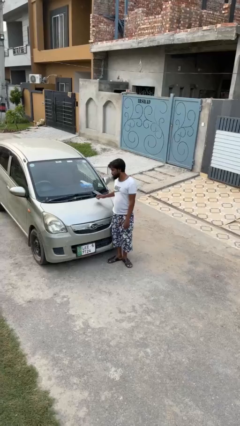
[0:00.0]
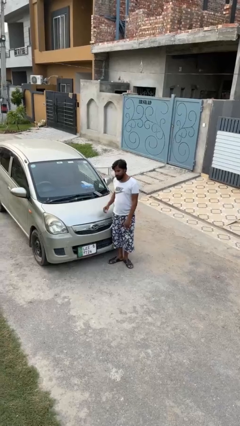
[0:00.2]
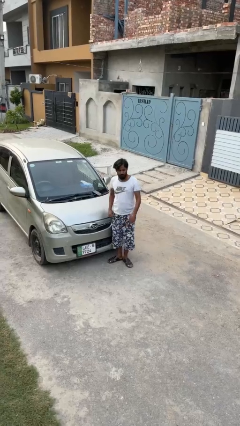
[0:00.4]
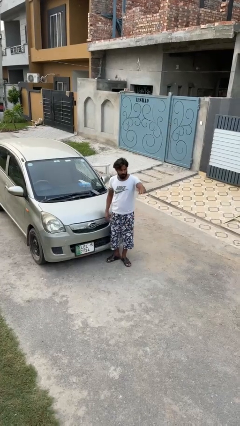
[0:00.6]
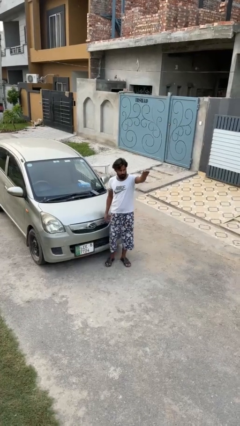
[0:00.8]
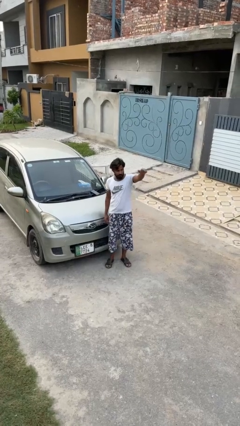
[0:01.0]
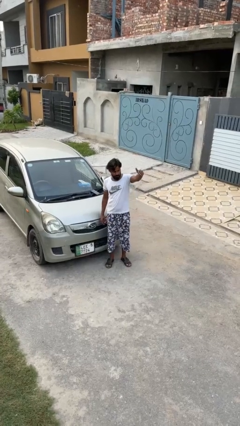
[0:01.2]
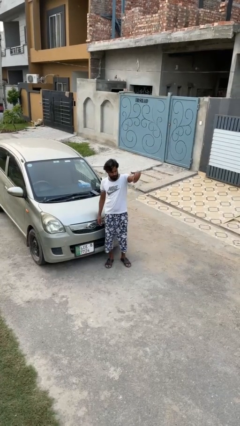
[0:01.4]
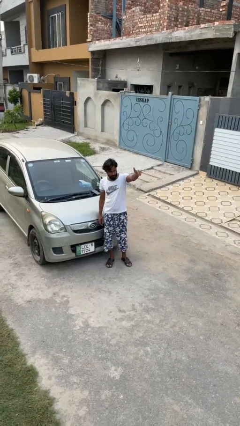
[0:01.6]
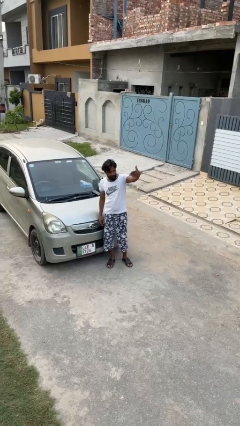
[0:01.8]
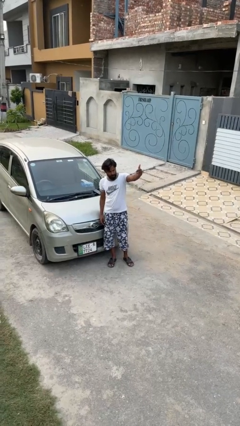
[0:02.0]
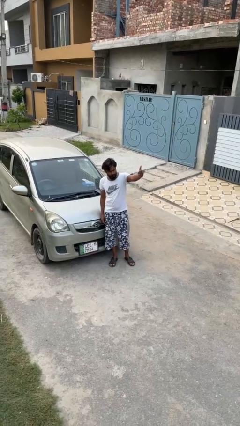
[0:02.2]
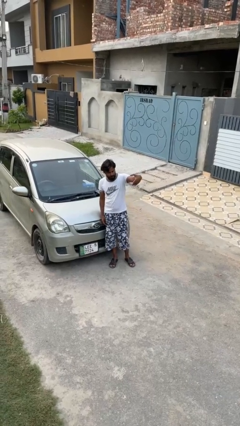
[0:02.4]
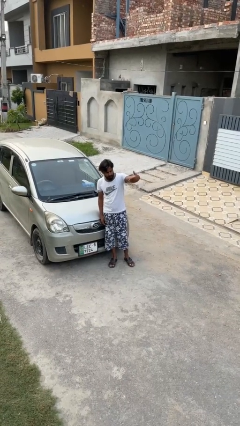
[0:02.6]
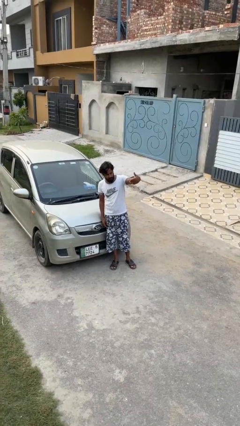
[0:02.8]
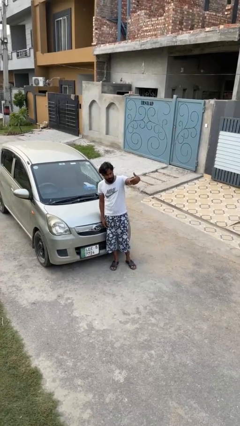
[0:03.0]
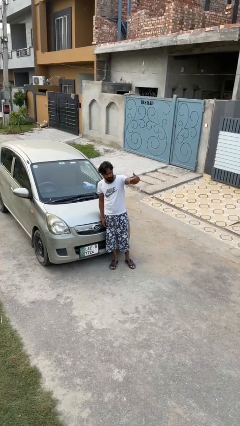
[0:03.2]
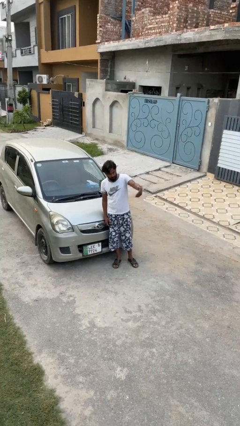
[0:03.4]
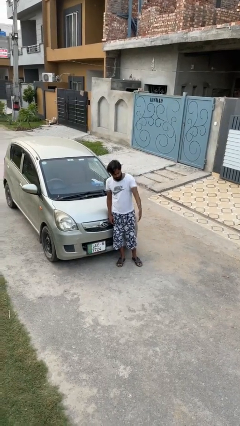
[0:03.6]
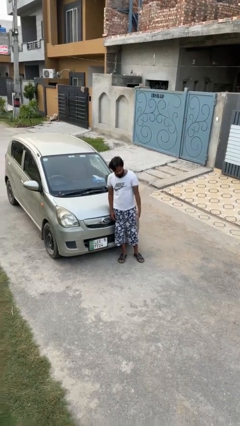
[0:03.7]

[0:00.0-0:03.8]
person gestures come here

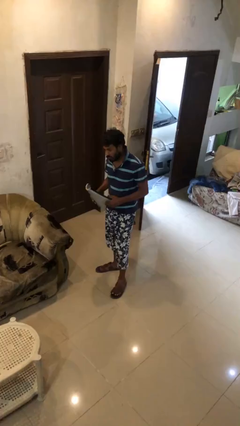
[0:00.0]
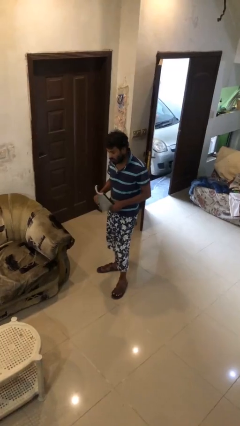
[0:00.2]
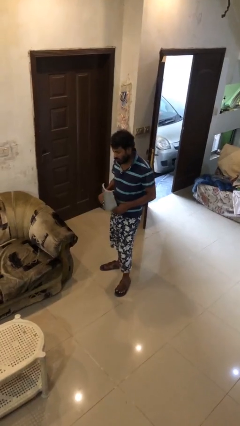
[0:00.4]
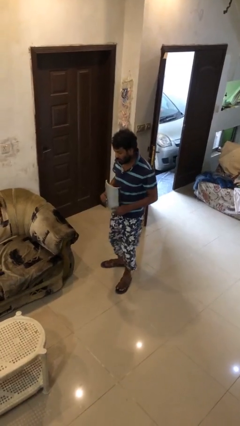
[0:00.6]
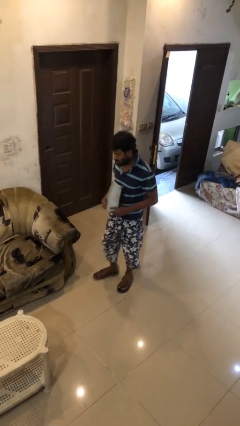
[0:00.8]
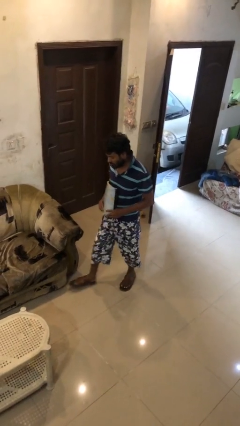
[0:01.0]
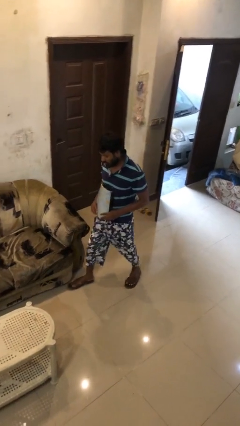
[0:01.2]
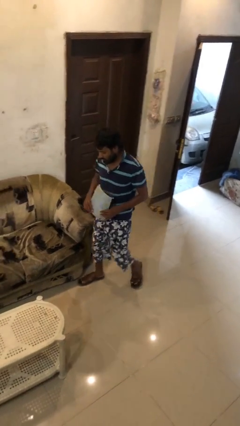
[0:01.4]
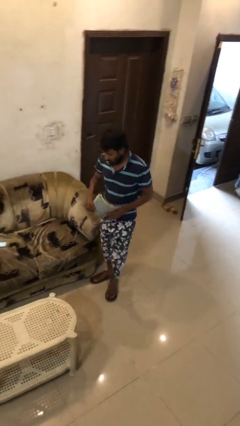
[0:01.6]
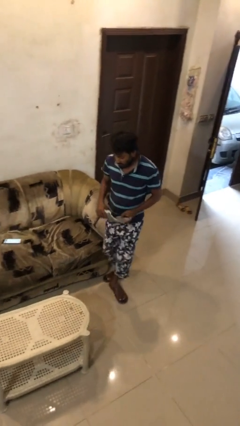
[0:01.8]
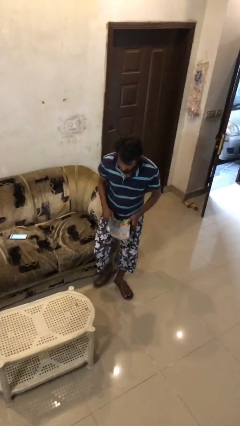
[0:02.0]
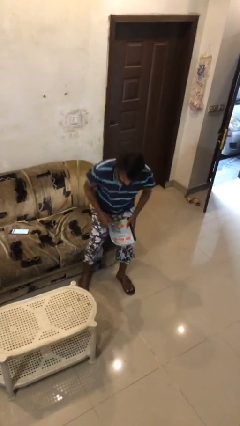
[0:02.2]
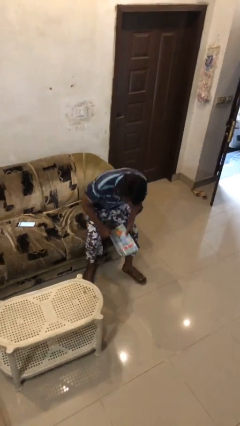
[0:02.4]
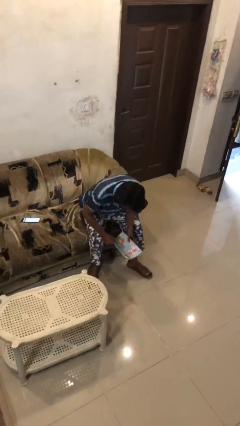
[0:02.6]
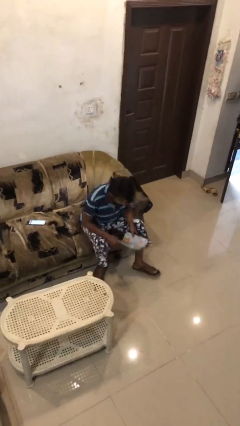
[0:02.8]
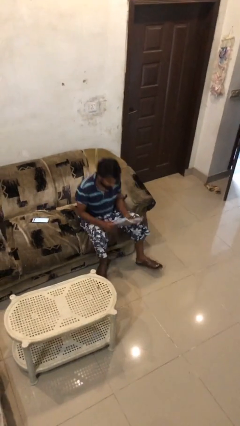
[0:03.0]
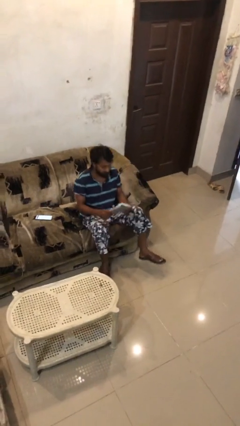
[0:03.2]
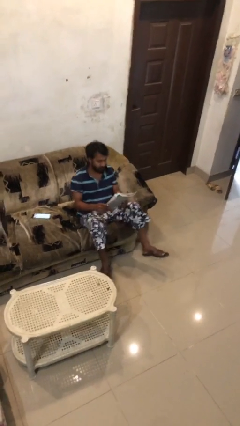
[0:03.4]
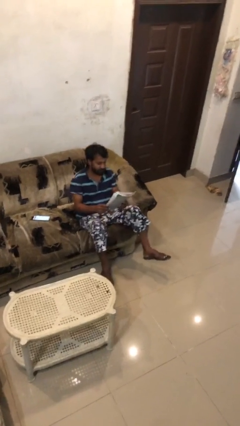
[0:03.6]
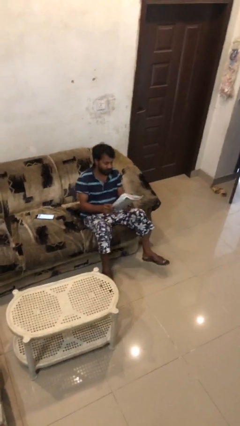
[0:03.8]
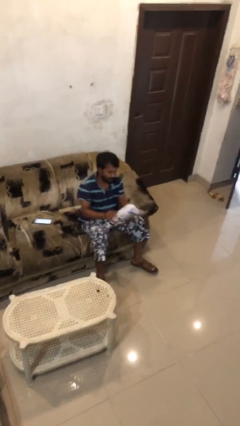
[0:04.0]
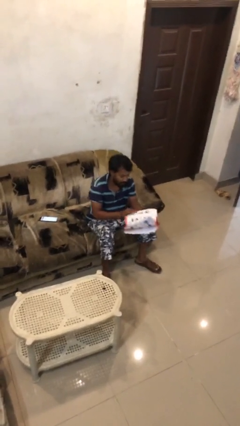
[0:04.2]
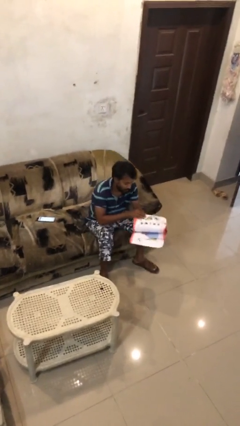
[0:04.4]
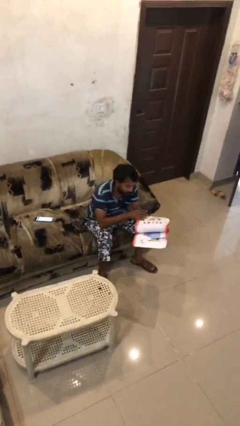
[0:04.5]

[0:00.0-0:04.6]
person sits down

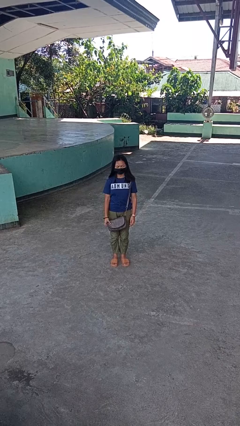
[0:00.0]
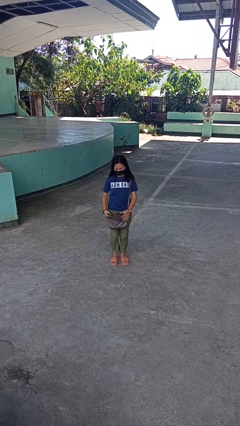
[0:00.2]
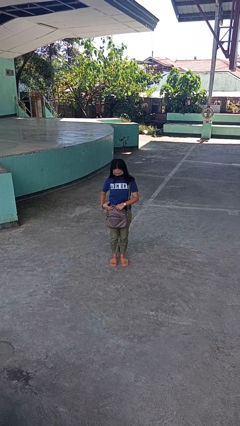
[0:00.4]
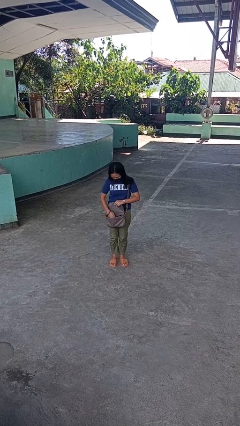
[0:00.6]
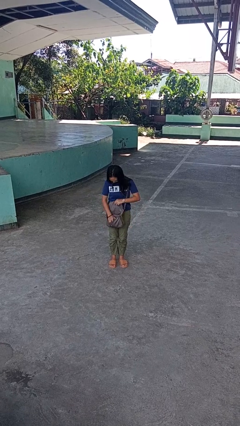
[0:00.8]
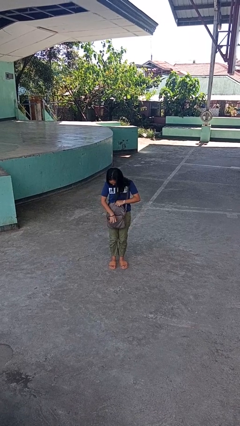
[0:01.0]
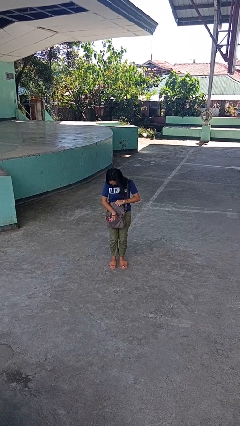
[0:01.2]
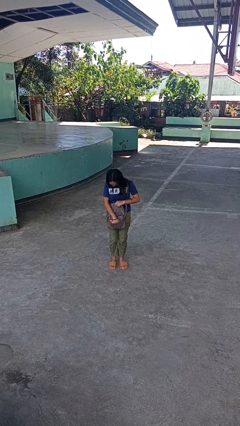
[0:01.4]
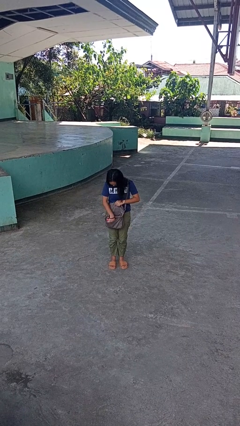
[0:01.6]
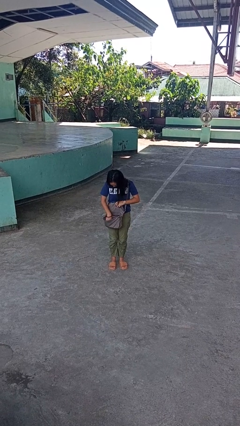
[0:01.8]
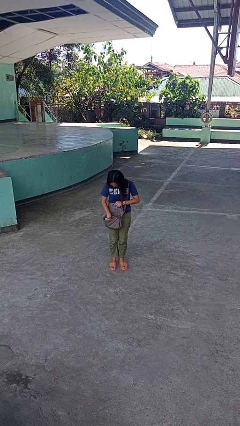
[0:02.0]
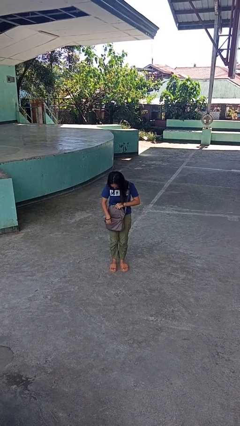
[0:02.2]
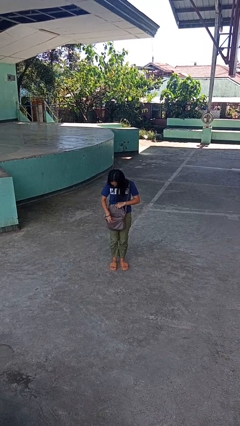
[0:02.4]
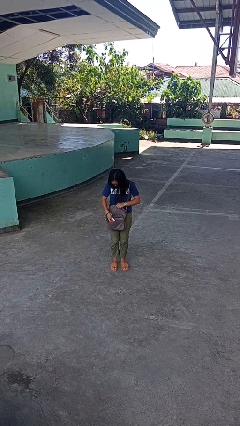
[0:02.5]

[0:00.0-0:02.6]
person searches in purse

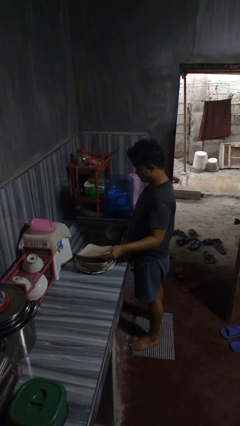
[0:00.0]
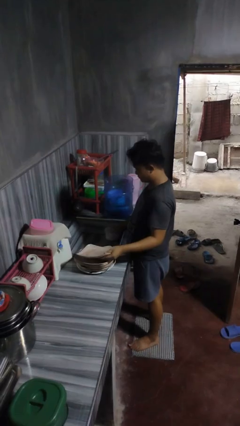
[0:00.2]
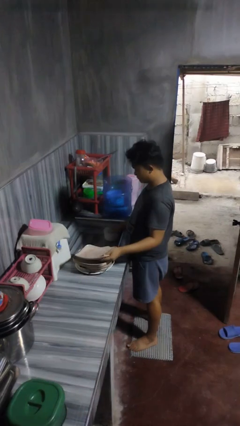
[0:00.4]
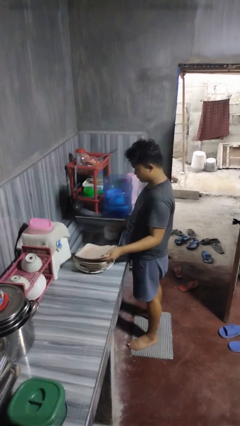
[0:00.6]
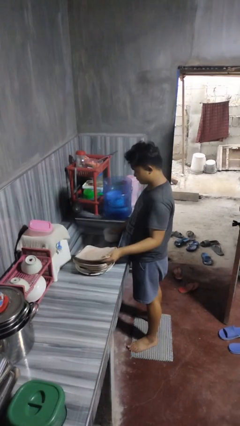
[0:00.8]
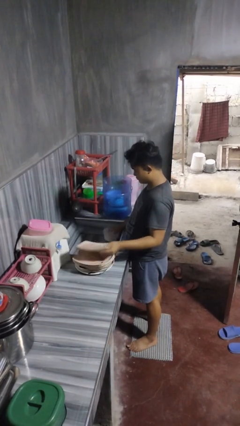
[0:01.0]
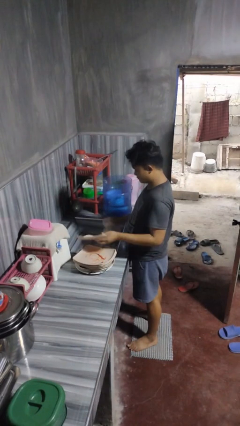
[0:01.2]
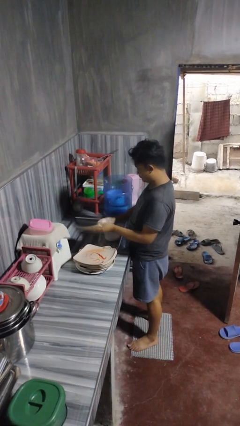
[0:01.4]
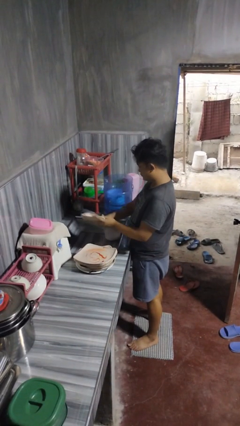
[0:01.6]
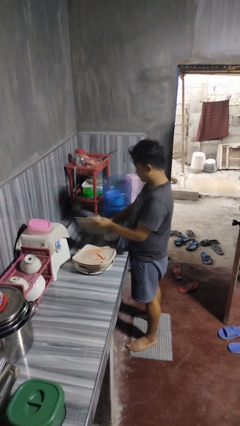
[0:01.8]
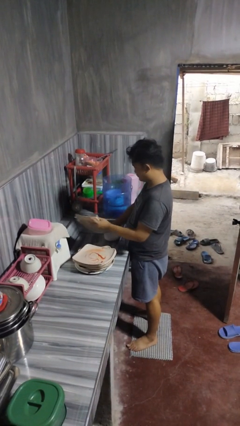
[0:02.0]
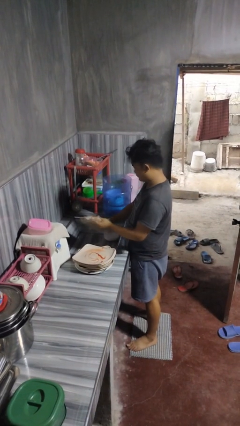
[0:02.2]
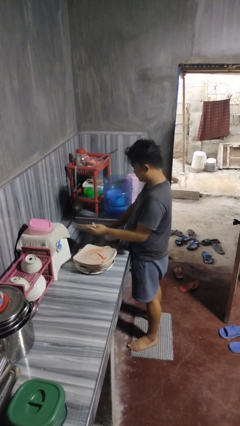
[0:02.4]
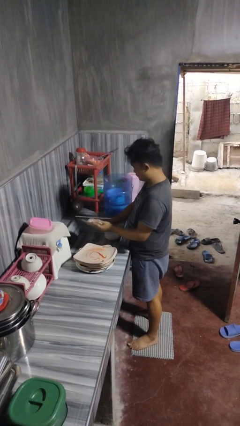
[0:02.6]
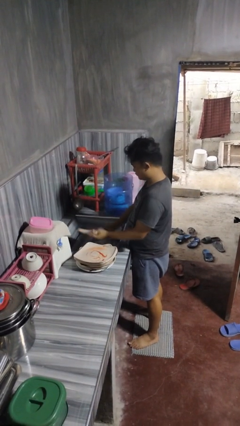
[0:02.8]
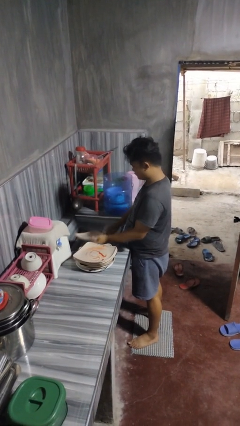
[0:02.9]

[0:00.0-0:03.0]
person washes dish

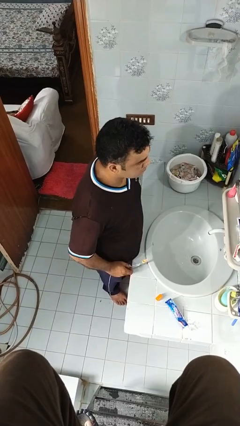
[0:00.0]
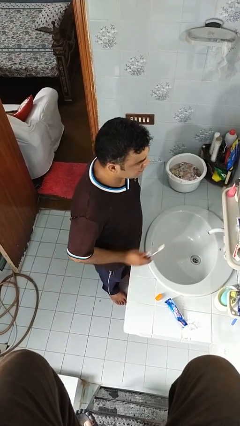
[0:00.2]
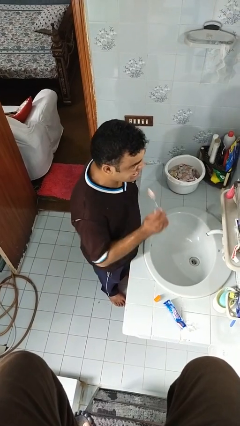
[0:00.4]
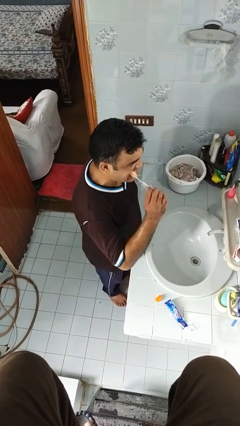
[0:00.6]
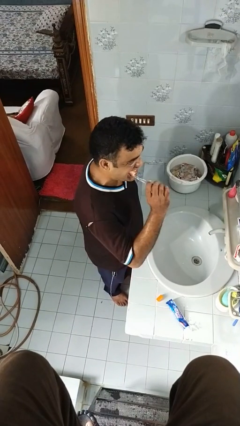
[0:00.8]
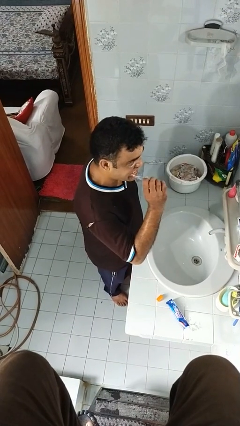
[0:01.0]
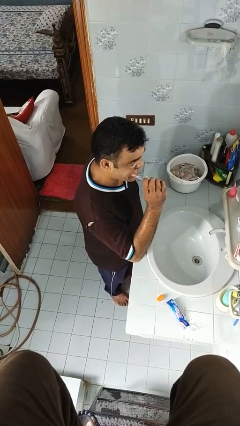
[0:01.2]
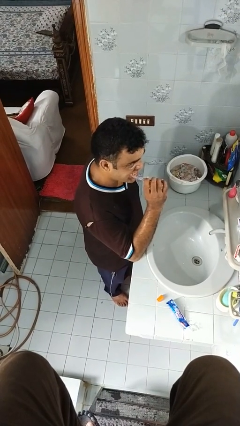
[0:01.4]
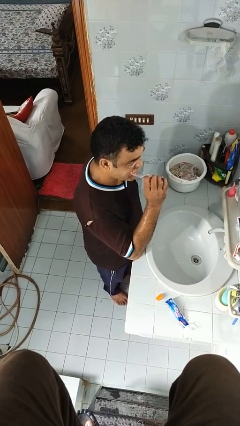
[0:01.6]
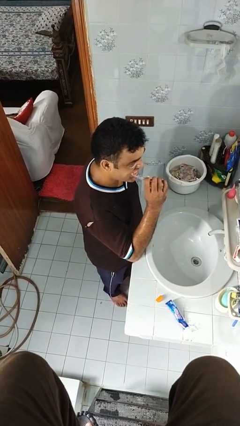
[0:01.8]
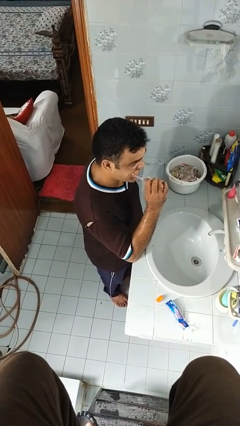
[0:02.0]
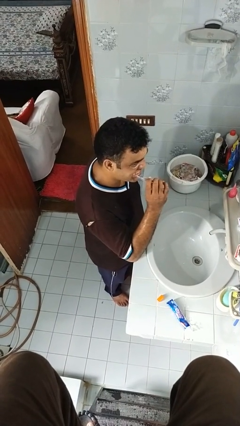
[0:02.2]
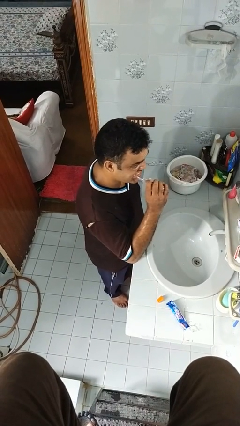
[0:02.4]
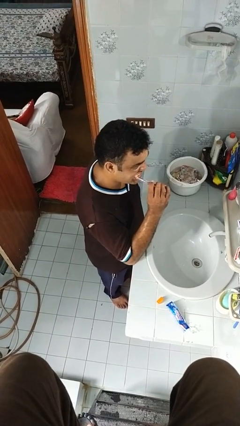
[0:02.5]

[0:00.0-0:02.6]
person brushes teeth

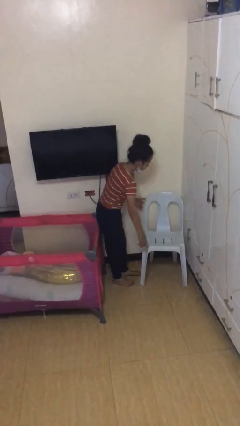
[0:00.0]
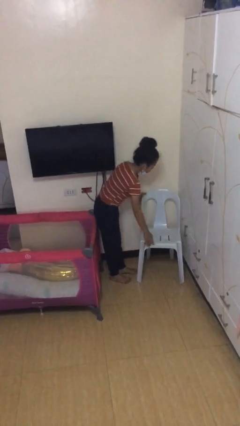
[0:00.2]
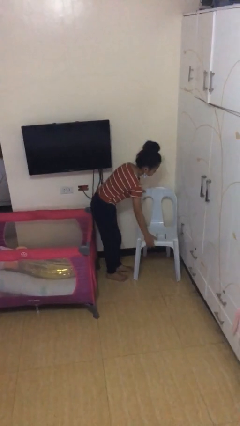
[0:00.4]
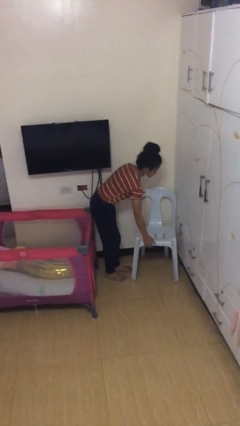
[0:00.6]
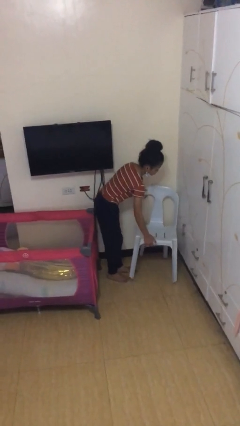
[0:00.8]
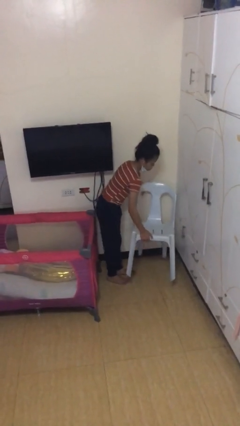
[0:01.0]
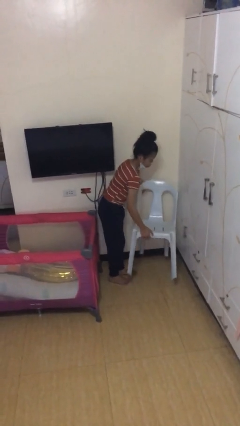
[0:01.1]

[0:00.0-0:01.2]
person picks up object from floor
